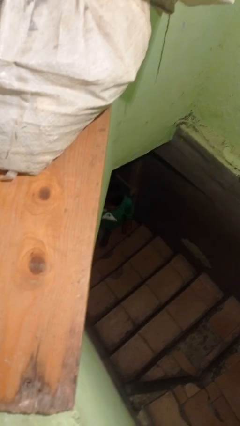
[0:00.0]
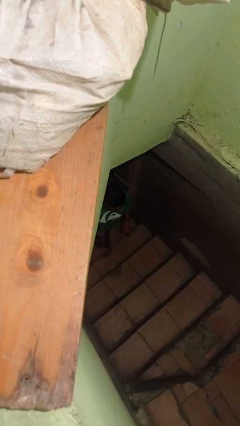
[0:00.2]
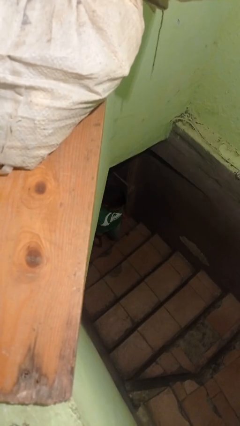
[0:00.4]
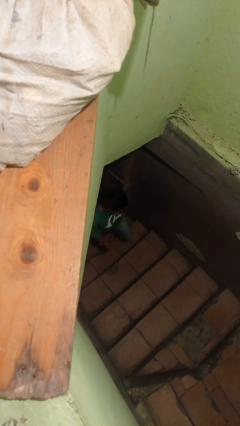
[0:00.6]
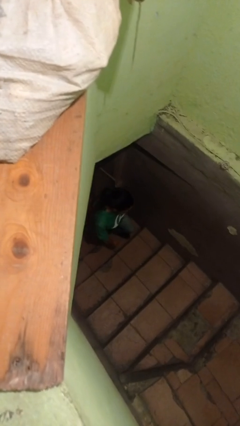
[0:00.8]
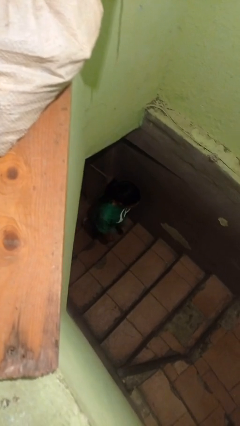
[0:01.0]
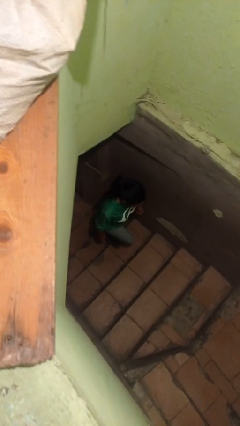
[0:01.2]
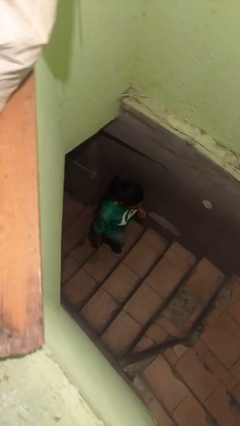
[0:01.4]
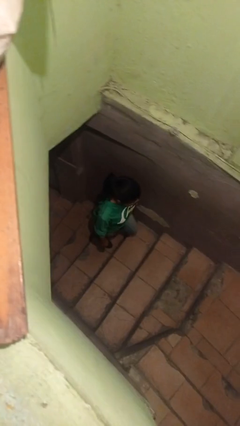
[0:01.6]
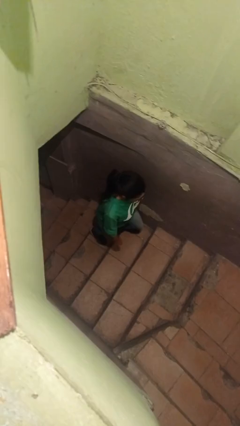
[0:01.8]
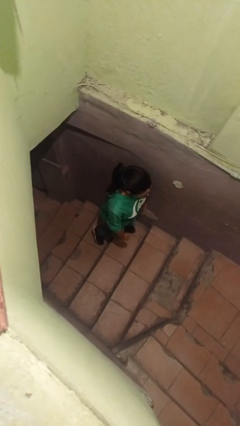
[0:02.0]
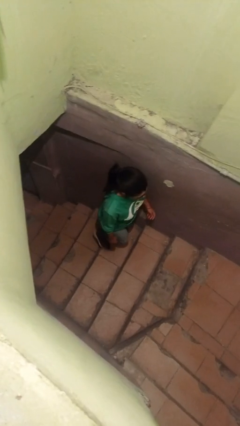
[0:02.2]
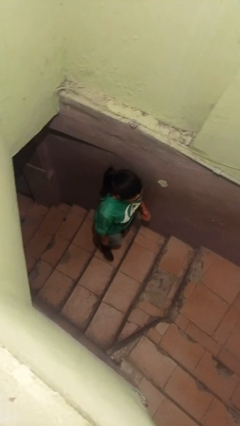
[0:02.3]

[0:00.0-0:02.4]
person climbs up stairs

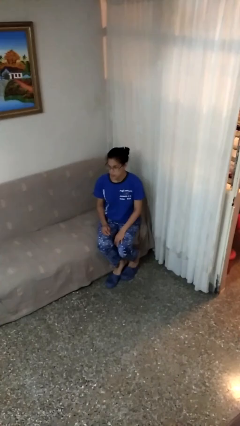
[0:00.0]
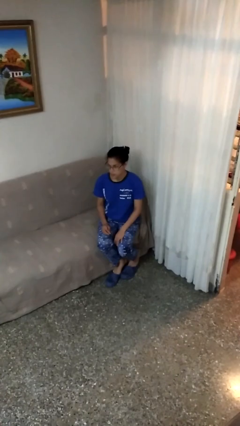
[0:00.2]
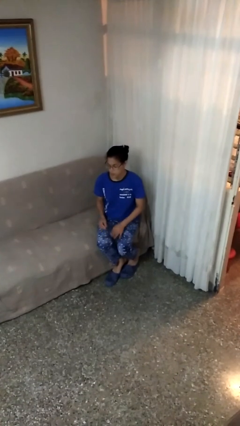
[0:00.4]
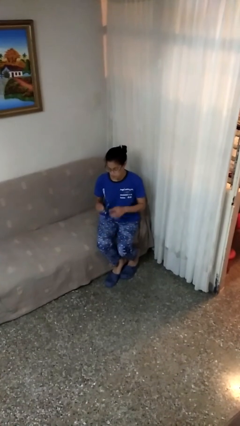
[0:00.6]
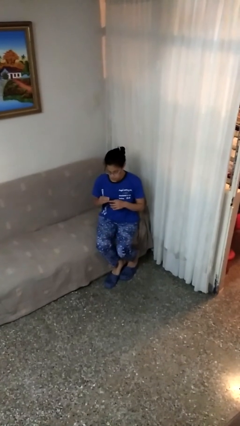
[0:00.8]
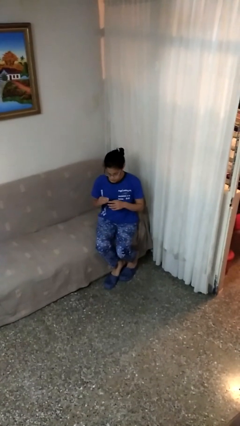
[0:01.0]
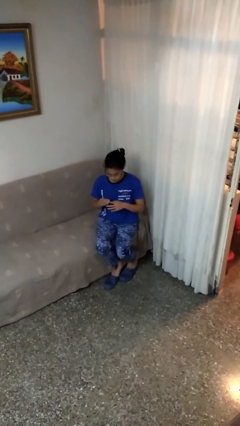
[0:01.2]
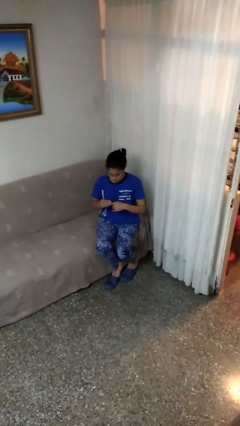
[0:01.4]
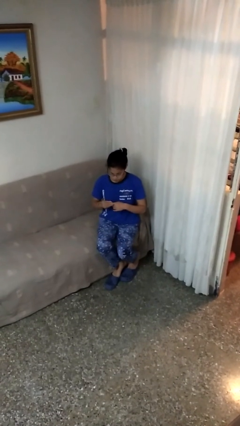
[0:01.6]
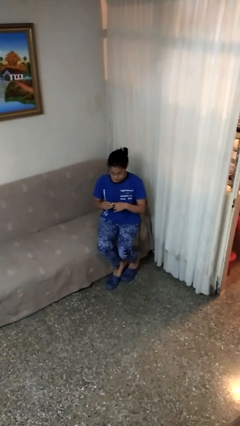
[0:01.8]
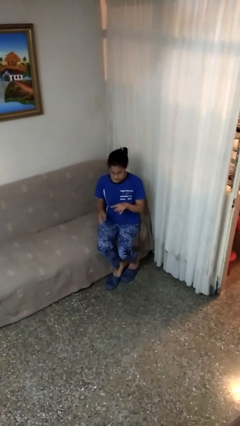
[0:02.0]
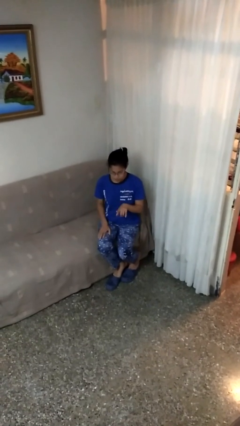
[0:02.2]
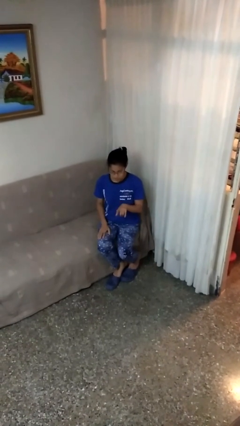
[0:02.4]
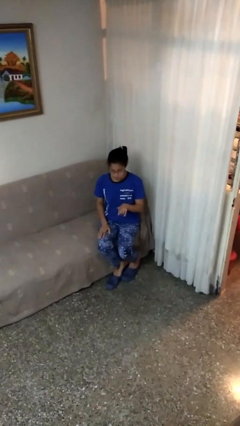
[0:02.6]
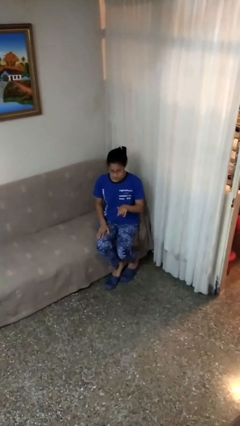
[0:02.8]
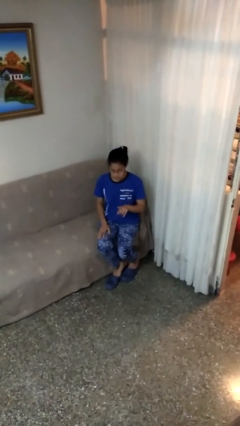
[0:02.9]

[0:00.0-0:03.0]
person puts on ring

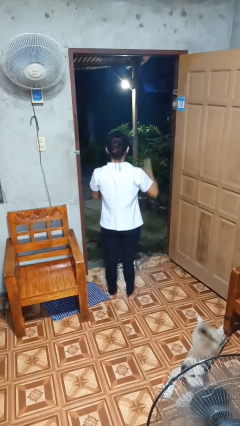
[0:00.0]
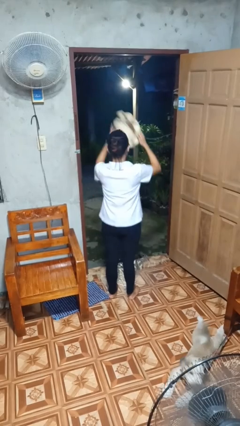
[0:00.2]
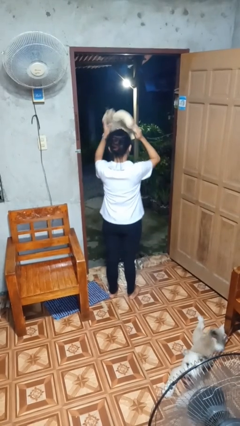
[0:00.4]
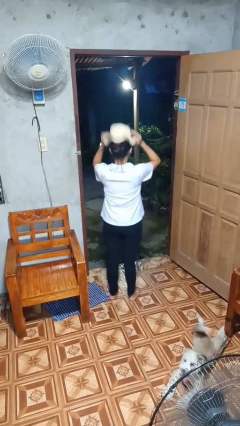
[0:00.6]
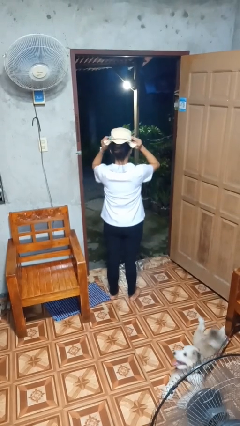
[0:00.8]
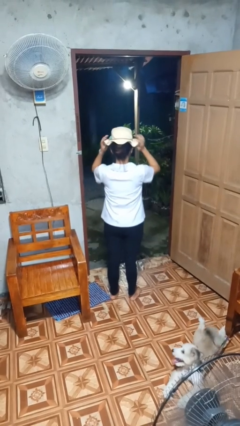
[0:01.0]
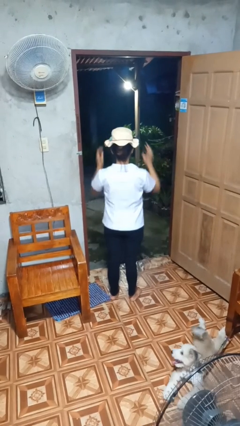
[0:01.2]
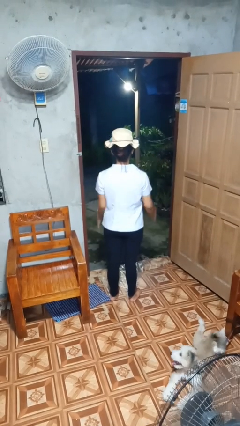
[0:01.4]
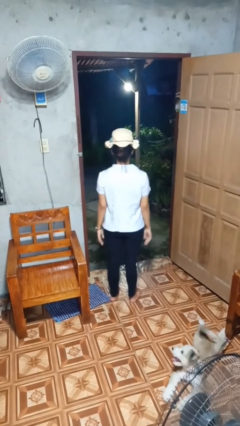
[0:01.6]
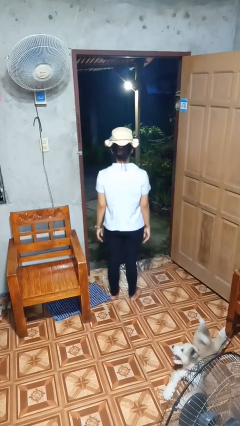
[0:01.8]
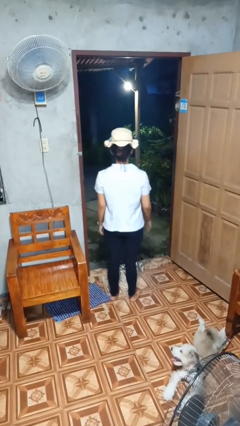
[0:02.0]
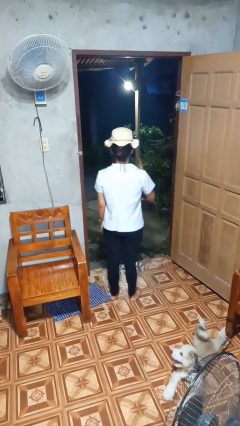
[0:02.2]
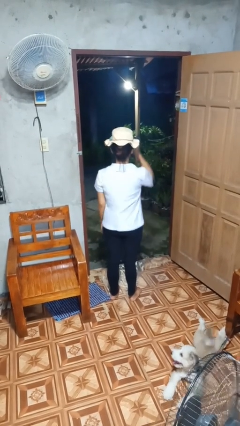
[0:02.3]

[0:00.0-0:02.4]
person puts on hat

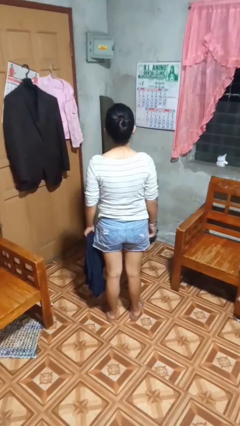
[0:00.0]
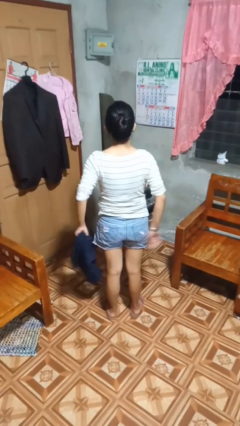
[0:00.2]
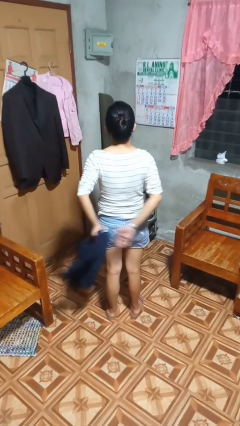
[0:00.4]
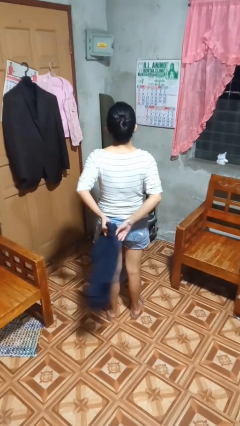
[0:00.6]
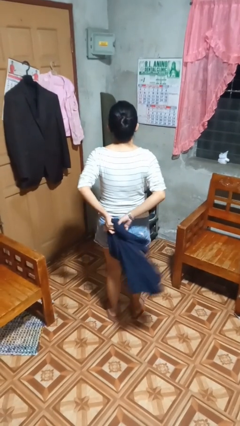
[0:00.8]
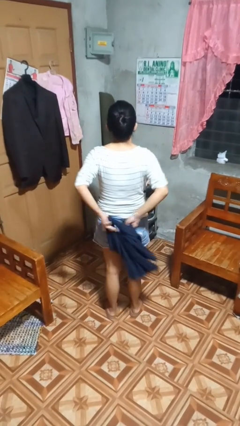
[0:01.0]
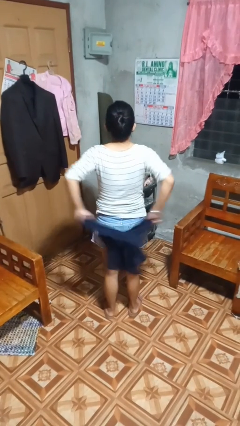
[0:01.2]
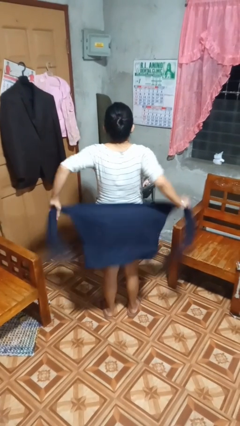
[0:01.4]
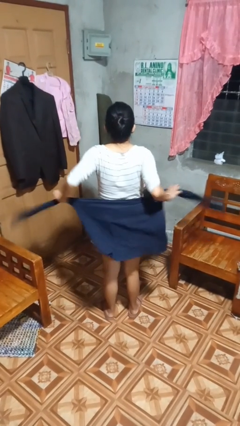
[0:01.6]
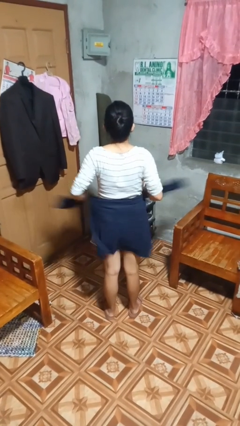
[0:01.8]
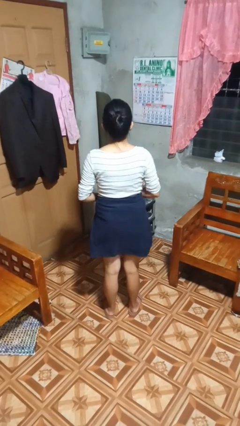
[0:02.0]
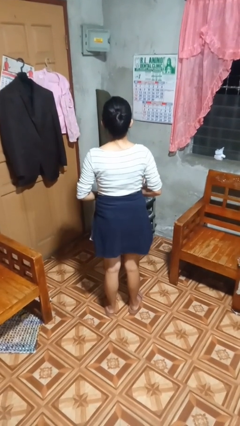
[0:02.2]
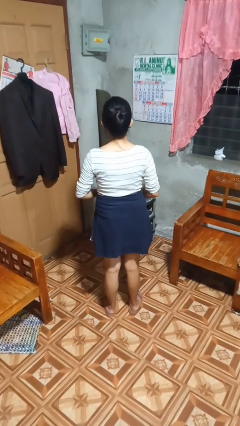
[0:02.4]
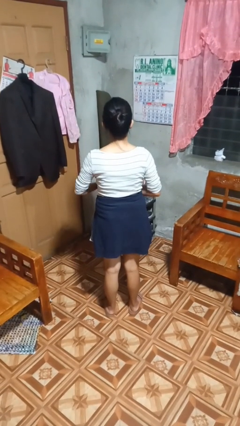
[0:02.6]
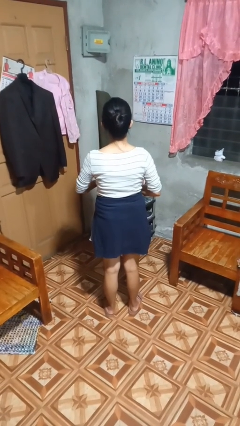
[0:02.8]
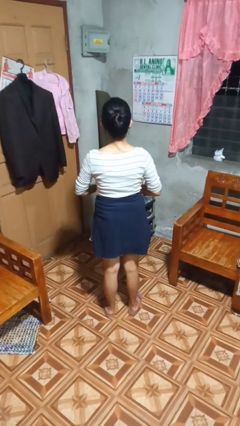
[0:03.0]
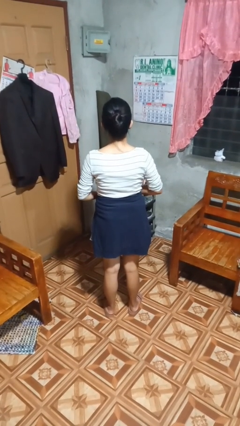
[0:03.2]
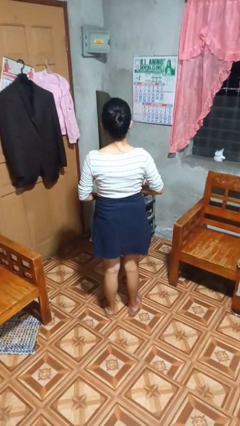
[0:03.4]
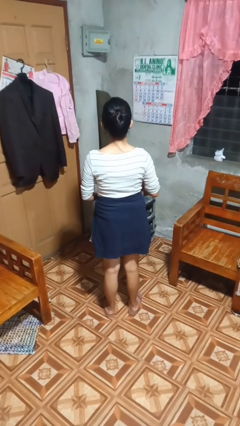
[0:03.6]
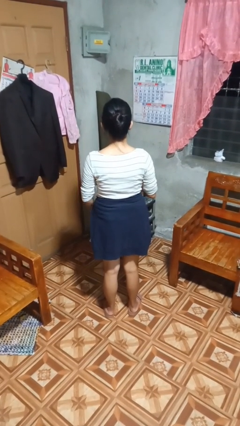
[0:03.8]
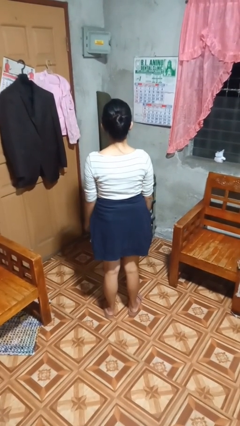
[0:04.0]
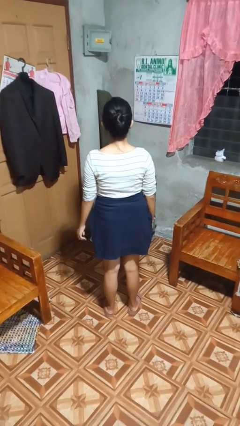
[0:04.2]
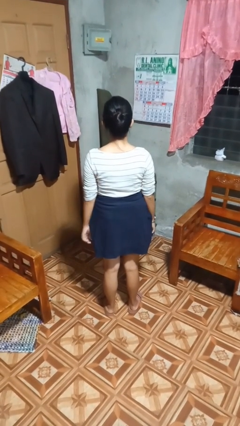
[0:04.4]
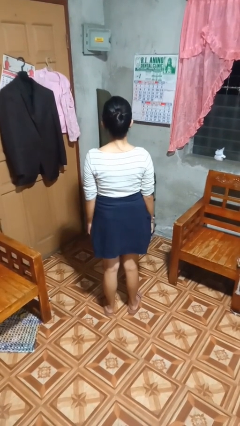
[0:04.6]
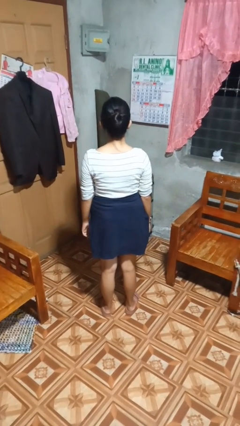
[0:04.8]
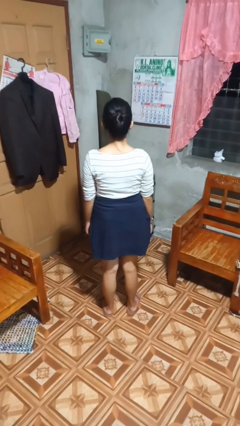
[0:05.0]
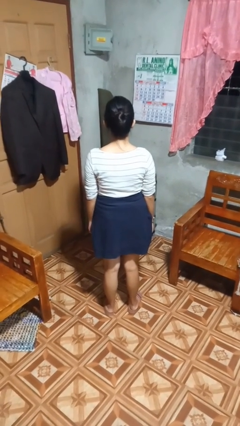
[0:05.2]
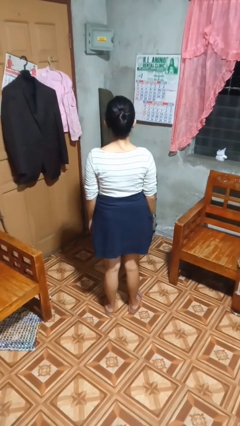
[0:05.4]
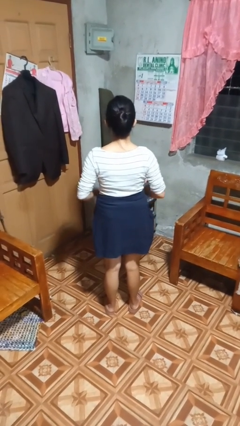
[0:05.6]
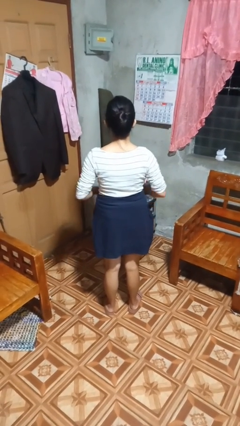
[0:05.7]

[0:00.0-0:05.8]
person ties jacket around waist

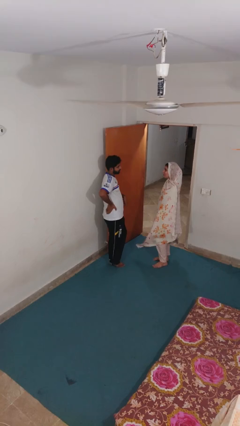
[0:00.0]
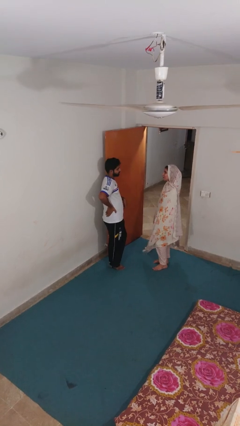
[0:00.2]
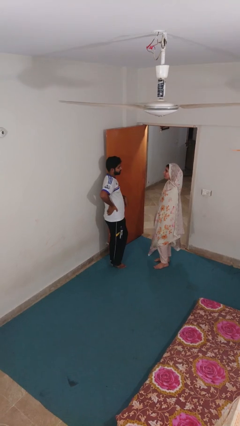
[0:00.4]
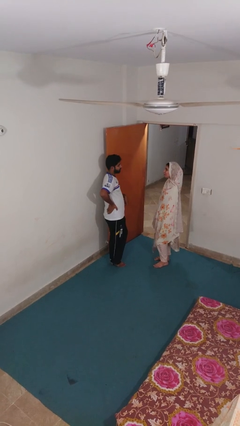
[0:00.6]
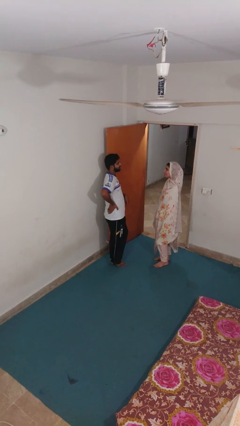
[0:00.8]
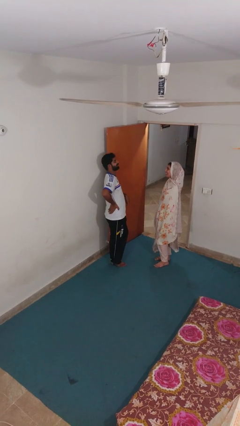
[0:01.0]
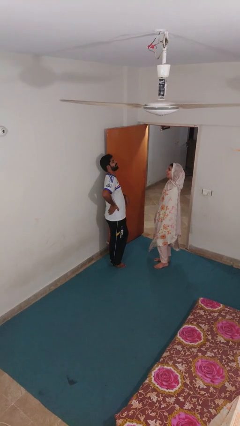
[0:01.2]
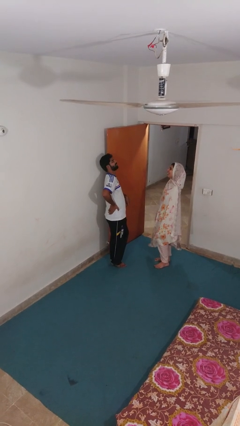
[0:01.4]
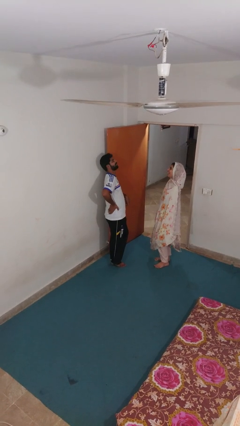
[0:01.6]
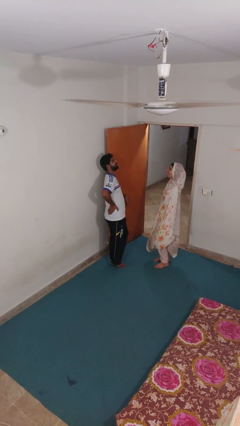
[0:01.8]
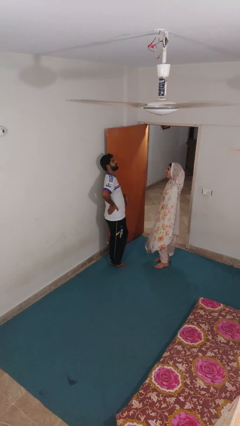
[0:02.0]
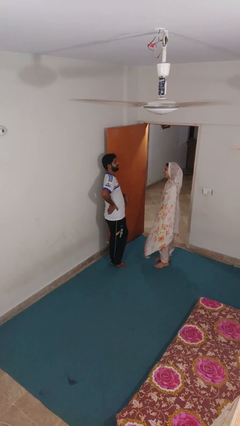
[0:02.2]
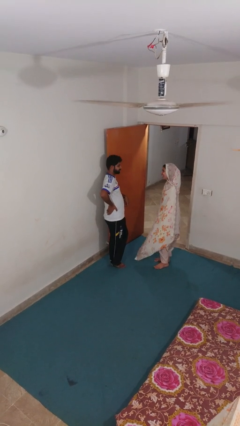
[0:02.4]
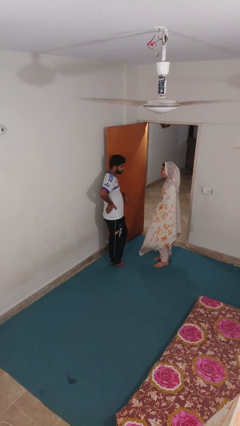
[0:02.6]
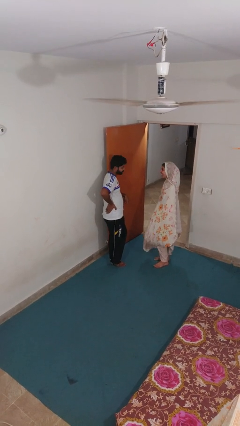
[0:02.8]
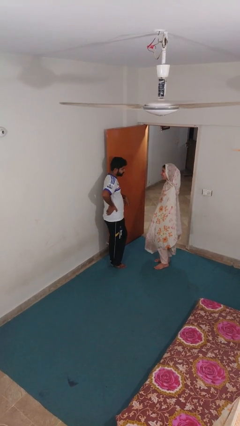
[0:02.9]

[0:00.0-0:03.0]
person laughs with person

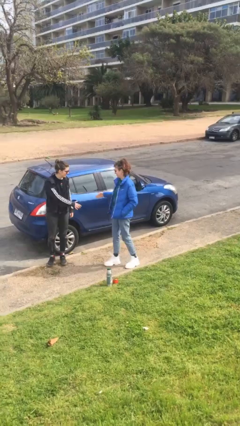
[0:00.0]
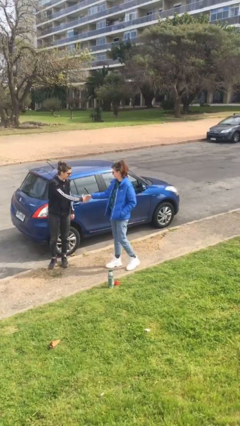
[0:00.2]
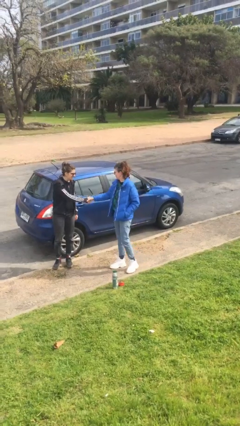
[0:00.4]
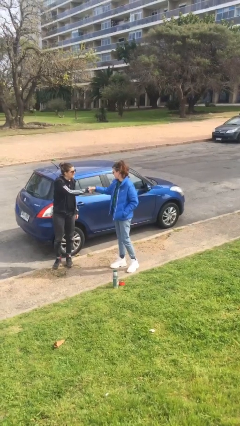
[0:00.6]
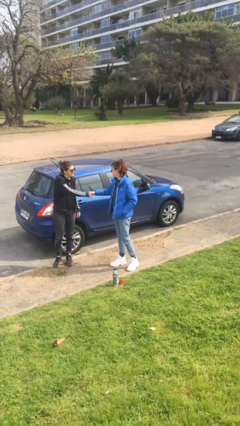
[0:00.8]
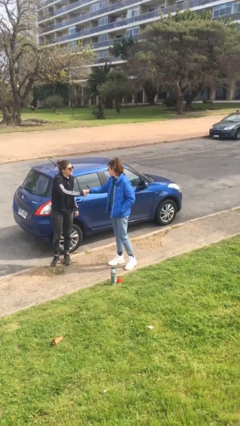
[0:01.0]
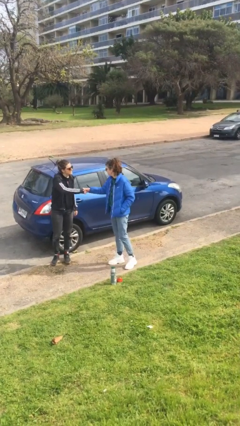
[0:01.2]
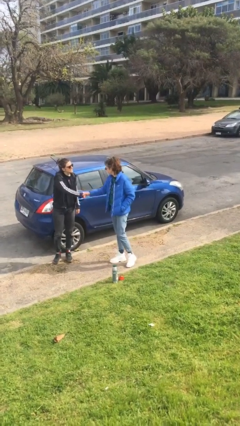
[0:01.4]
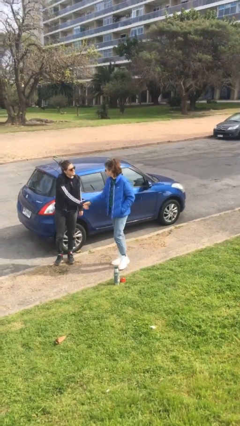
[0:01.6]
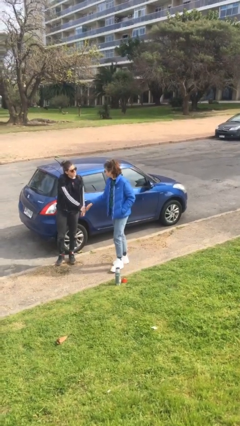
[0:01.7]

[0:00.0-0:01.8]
person shakes hand
